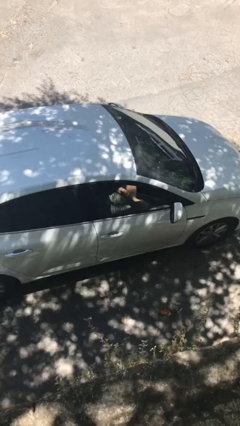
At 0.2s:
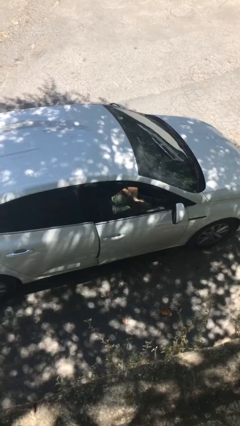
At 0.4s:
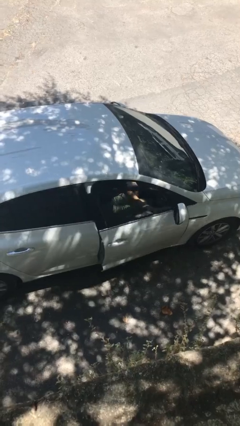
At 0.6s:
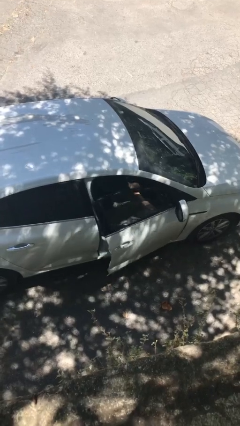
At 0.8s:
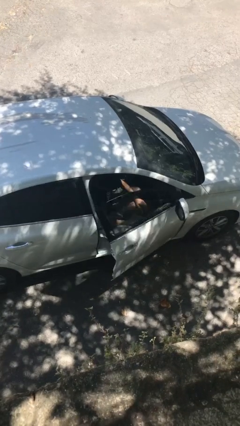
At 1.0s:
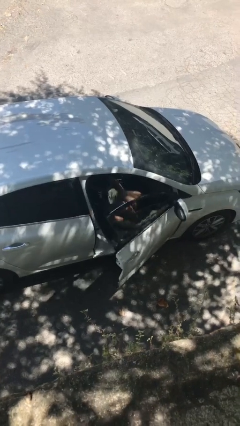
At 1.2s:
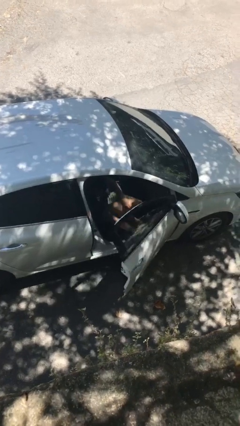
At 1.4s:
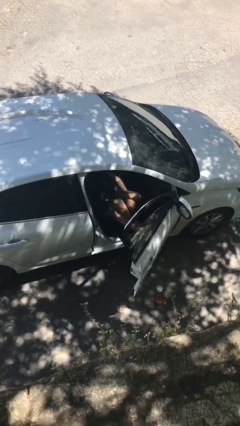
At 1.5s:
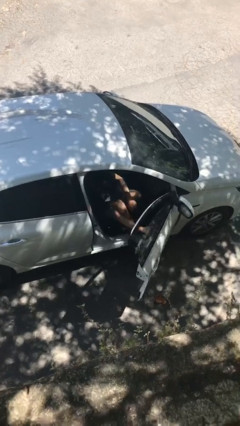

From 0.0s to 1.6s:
person opens car door

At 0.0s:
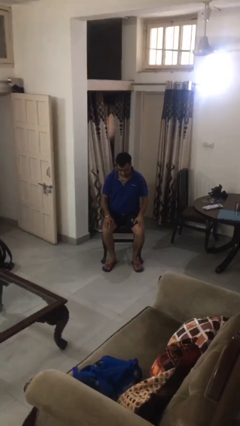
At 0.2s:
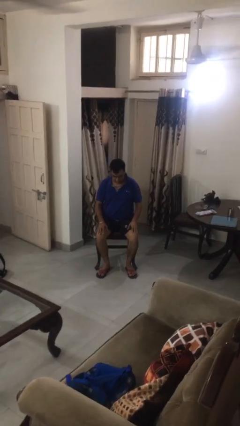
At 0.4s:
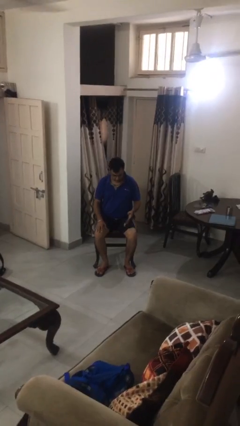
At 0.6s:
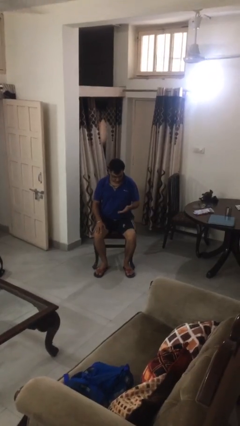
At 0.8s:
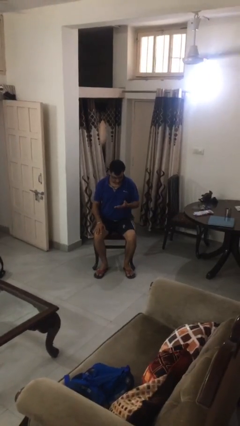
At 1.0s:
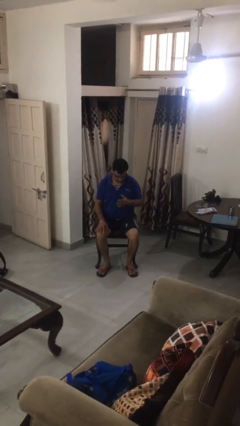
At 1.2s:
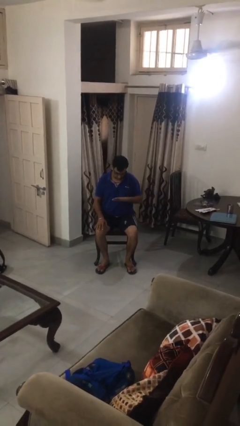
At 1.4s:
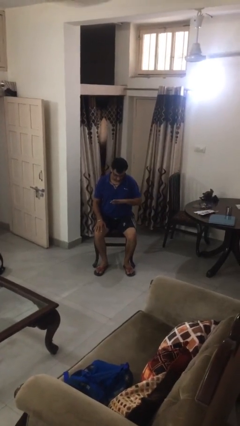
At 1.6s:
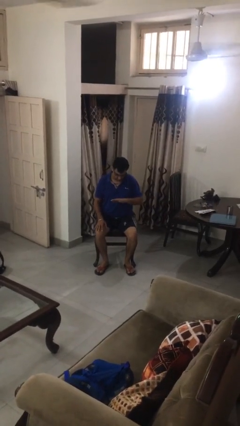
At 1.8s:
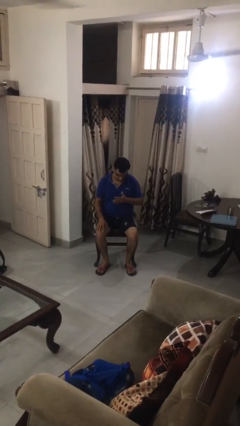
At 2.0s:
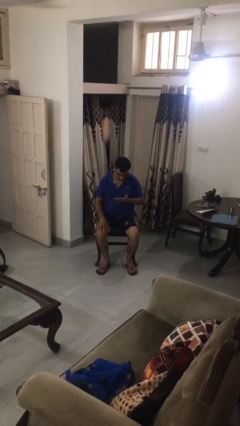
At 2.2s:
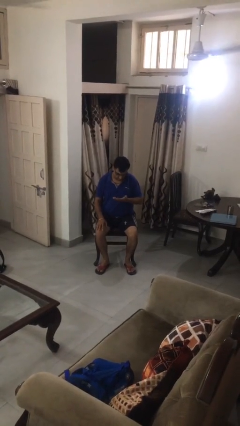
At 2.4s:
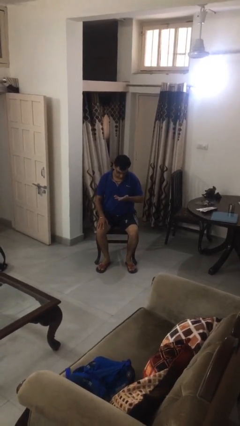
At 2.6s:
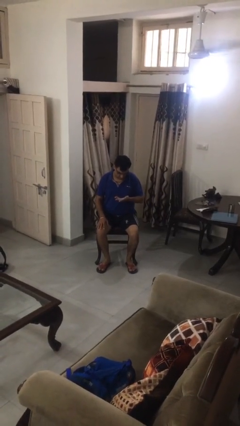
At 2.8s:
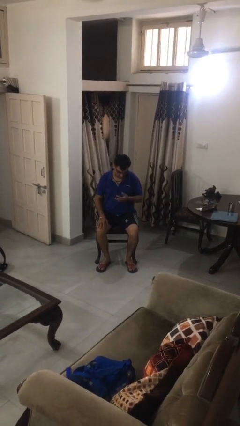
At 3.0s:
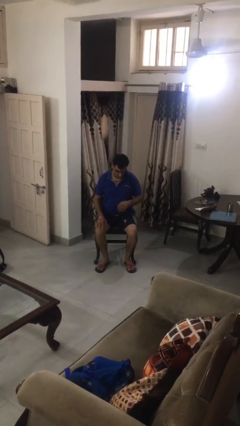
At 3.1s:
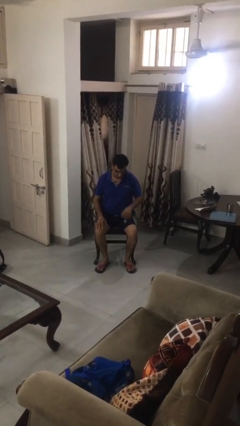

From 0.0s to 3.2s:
person looks at hands in lap

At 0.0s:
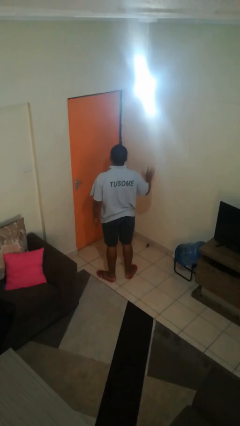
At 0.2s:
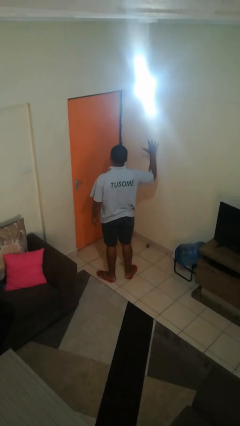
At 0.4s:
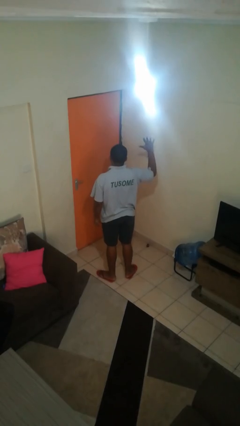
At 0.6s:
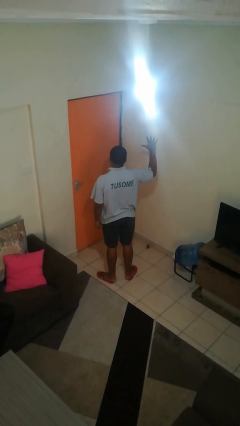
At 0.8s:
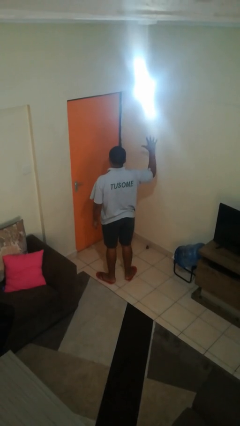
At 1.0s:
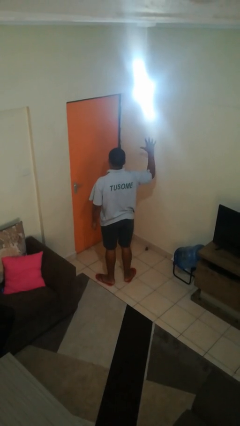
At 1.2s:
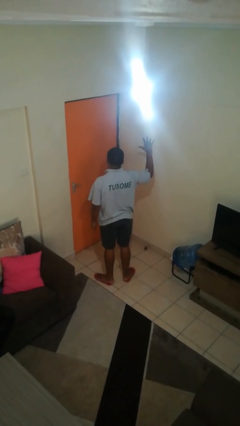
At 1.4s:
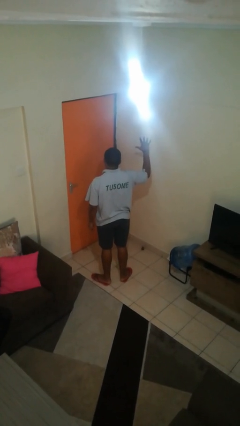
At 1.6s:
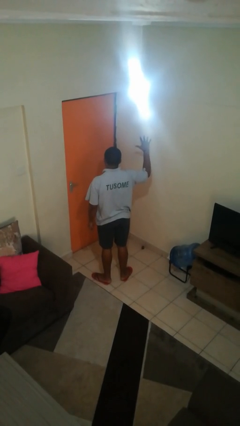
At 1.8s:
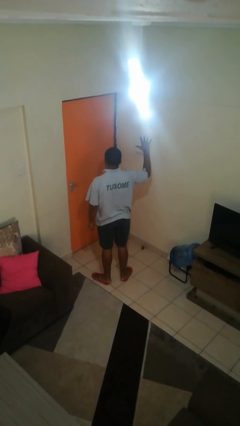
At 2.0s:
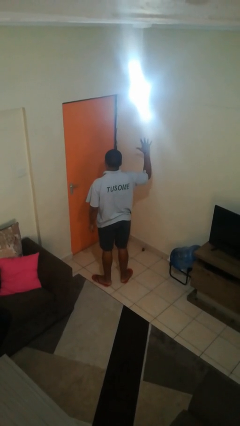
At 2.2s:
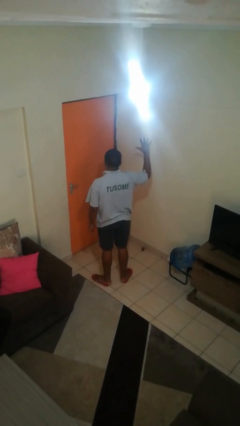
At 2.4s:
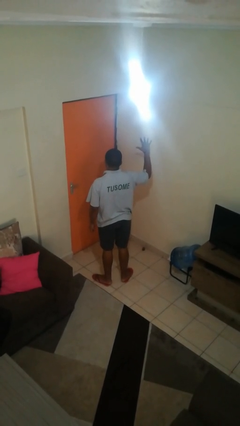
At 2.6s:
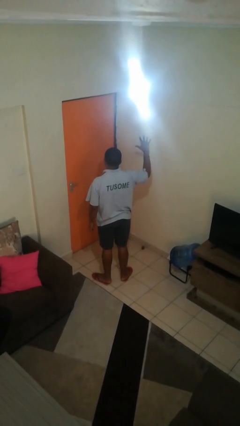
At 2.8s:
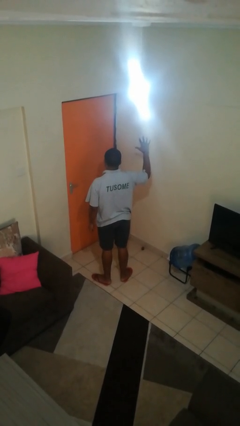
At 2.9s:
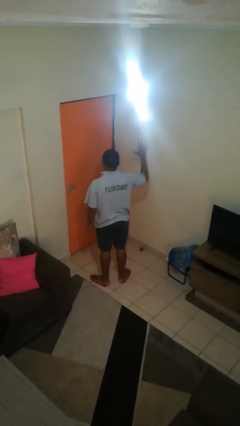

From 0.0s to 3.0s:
person gestures number five

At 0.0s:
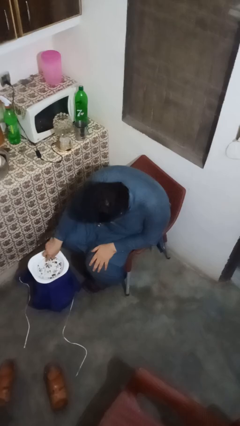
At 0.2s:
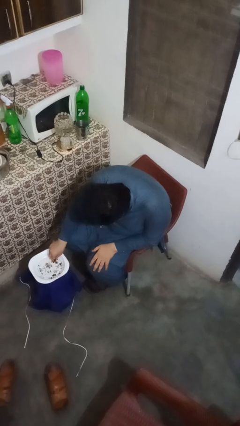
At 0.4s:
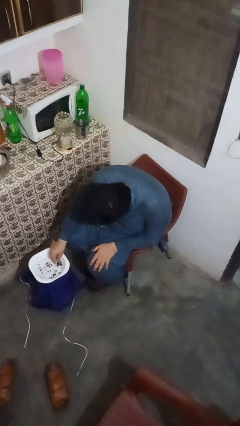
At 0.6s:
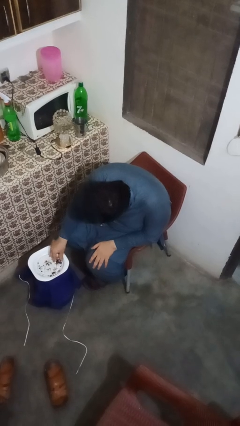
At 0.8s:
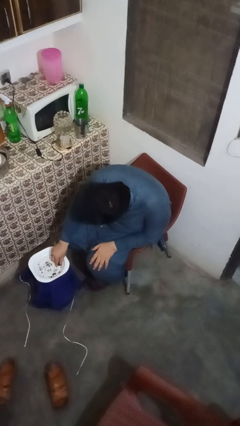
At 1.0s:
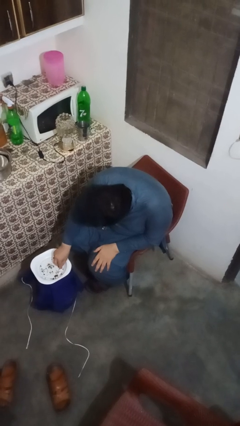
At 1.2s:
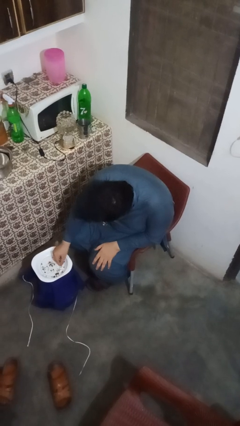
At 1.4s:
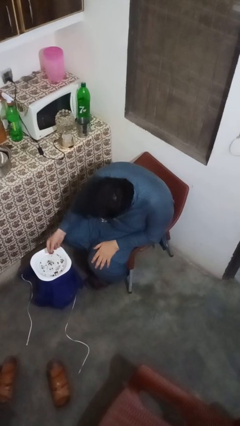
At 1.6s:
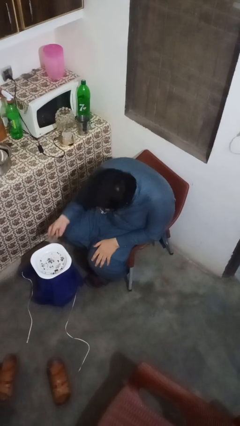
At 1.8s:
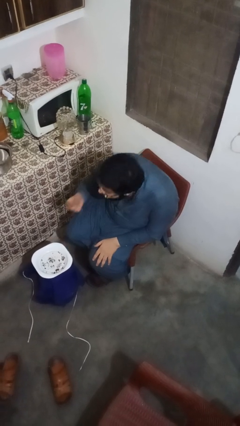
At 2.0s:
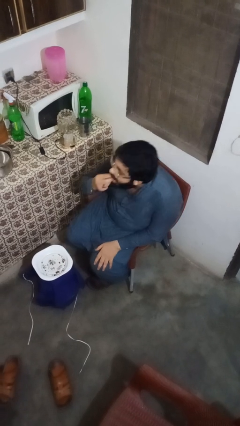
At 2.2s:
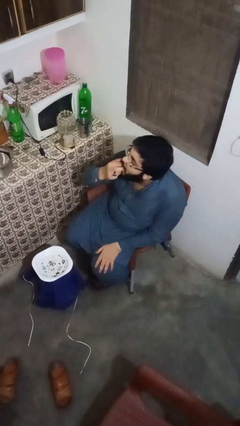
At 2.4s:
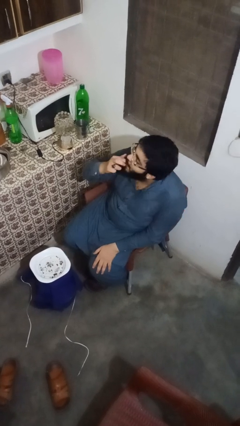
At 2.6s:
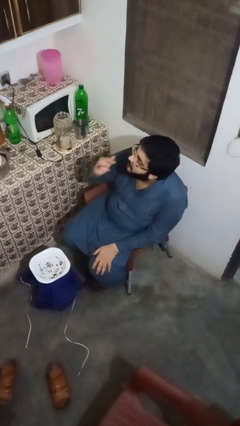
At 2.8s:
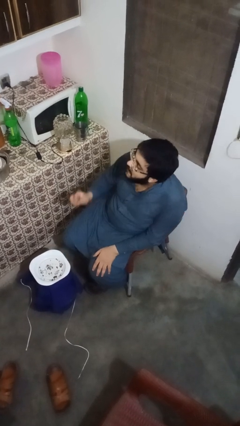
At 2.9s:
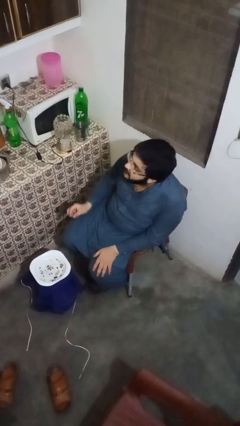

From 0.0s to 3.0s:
person eats with hands

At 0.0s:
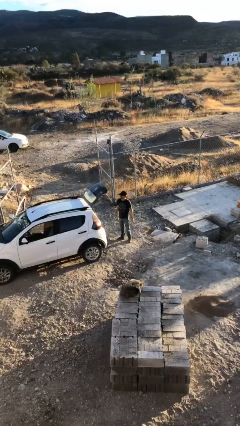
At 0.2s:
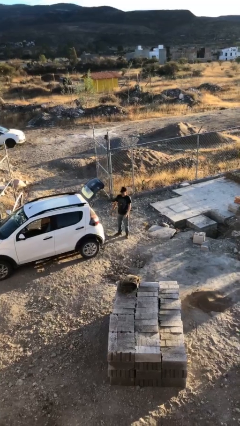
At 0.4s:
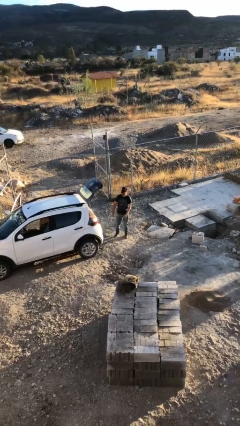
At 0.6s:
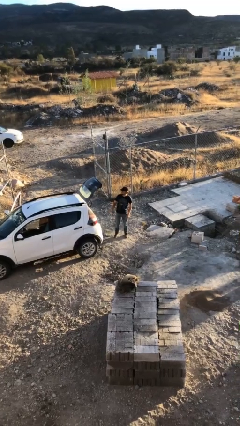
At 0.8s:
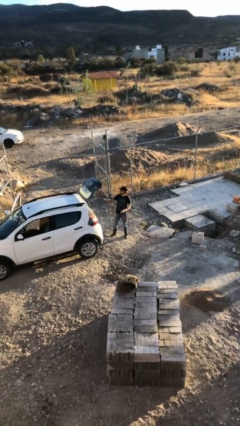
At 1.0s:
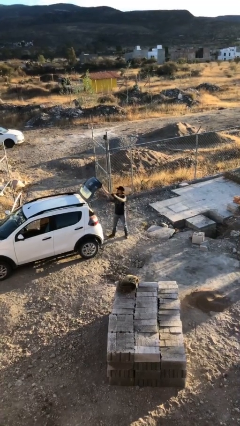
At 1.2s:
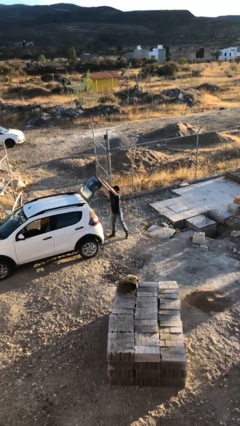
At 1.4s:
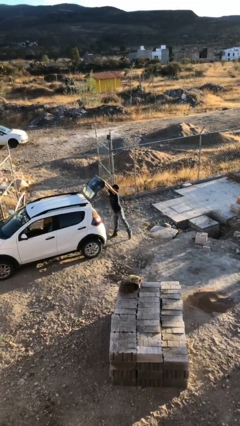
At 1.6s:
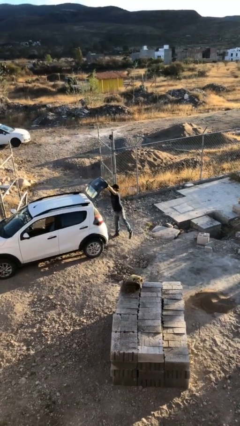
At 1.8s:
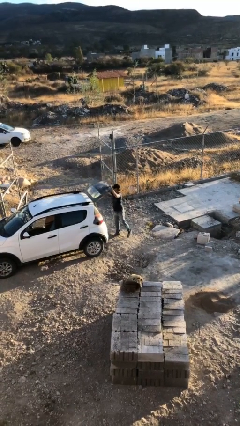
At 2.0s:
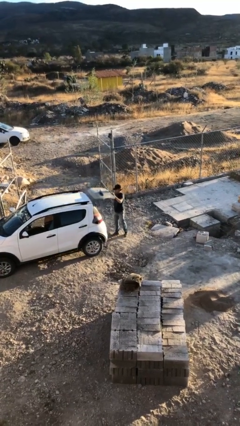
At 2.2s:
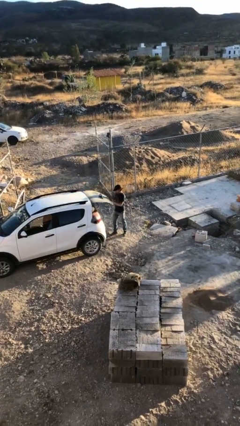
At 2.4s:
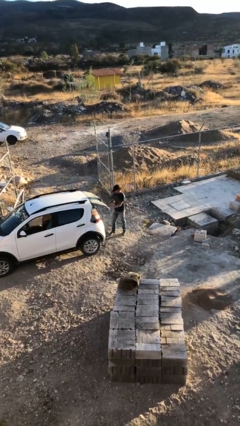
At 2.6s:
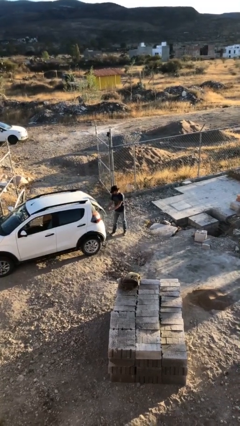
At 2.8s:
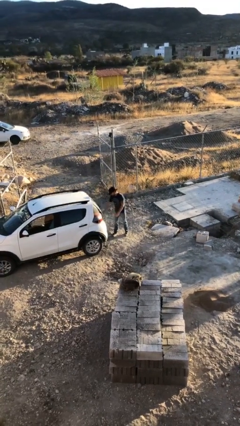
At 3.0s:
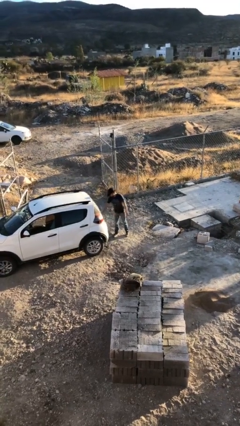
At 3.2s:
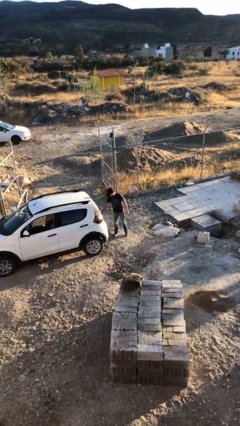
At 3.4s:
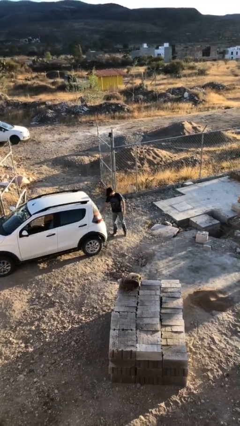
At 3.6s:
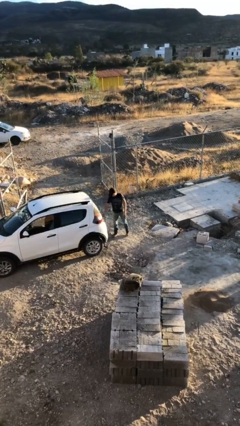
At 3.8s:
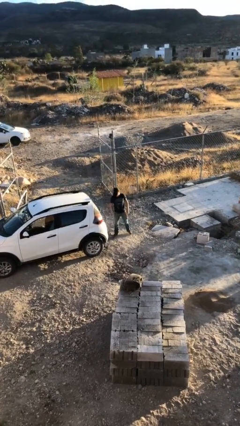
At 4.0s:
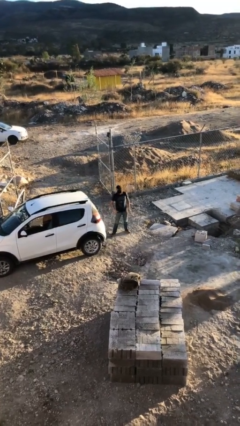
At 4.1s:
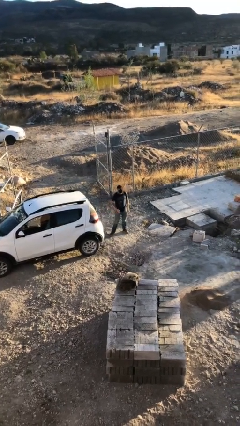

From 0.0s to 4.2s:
person closes car trunk

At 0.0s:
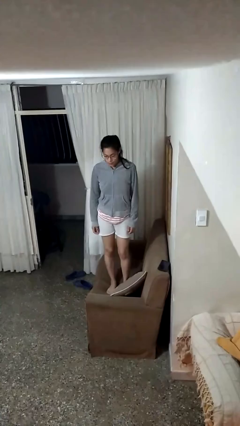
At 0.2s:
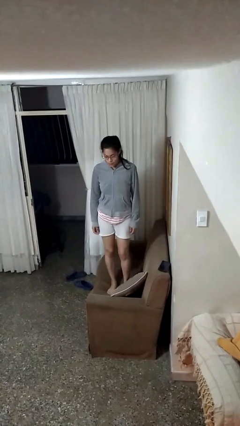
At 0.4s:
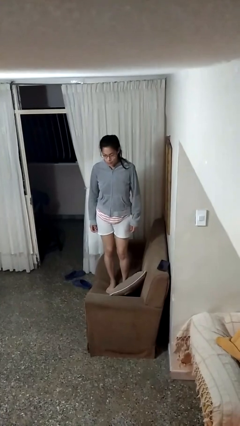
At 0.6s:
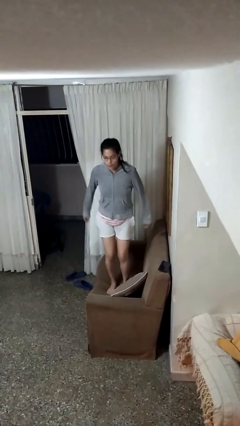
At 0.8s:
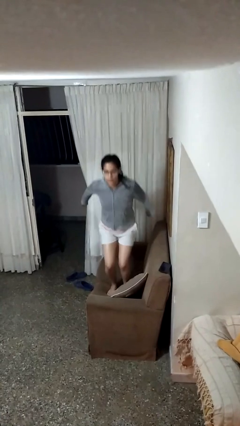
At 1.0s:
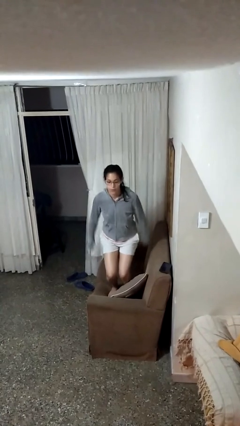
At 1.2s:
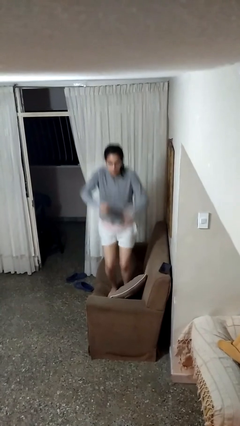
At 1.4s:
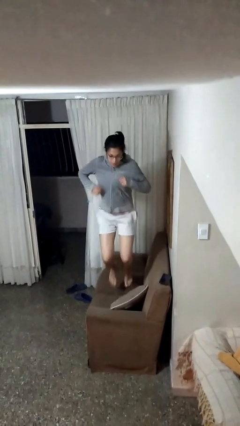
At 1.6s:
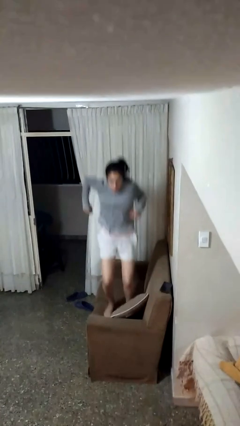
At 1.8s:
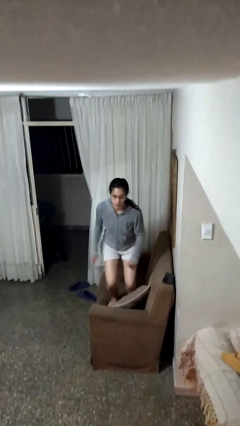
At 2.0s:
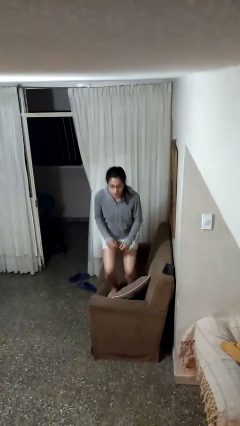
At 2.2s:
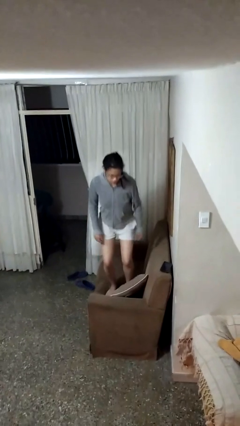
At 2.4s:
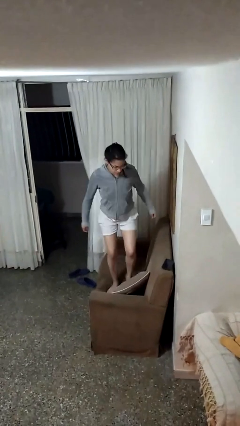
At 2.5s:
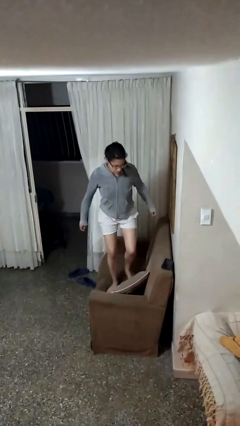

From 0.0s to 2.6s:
person jumps on couch
